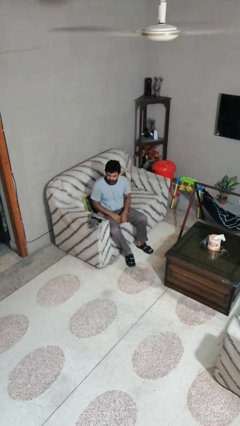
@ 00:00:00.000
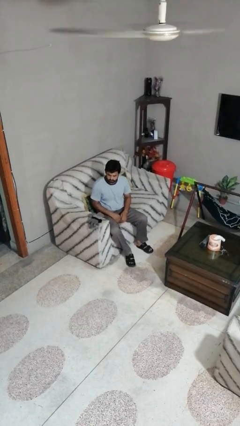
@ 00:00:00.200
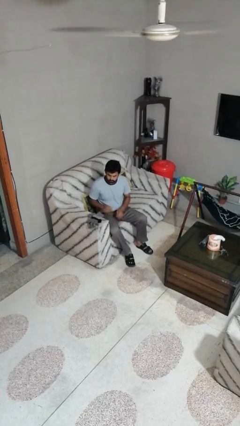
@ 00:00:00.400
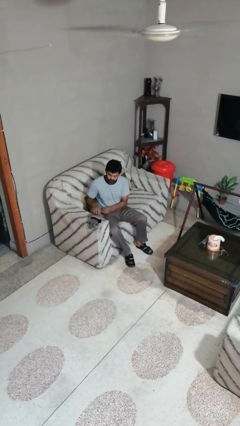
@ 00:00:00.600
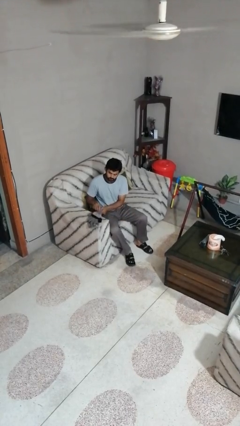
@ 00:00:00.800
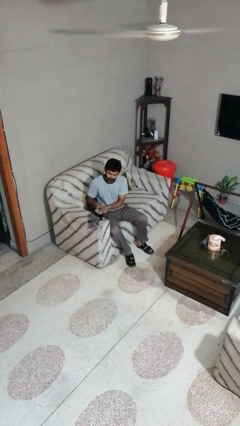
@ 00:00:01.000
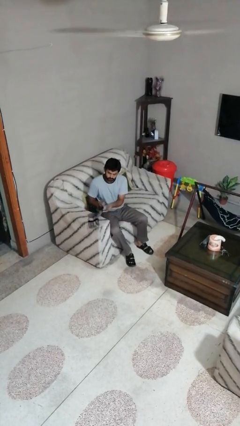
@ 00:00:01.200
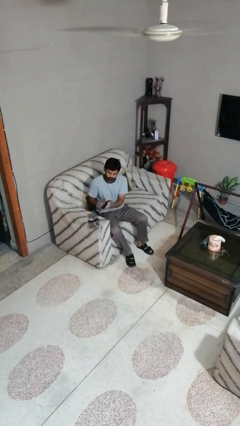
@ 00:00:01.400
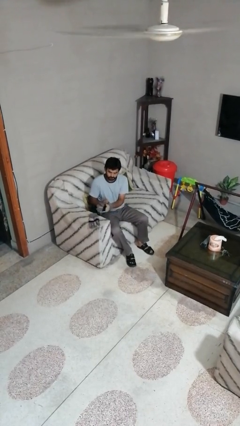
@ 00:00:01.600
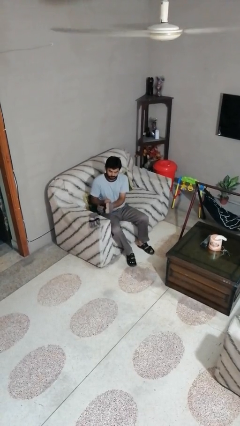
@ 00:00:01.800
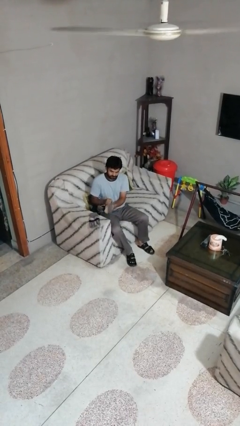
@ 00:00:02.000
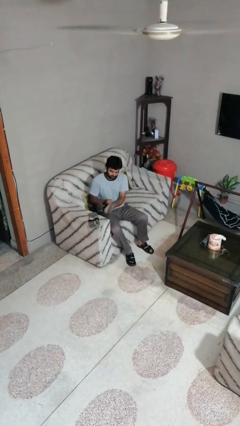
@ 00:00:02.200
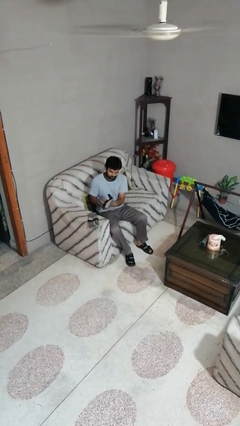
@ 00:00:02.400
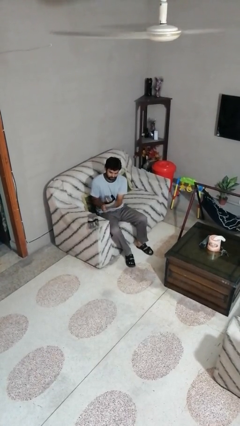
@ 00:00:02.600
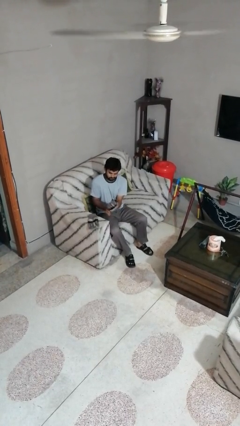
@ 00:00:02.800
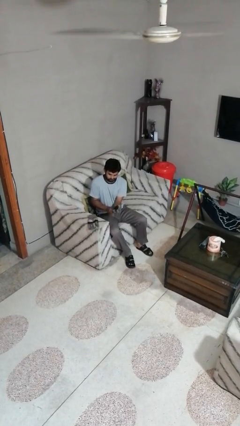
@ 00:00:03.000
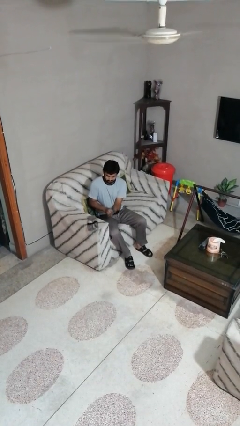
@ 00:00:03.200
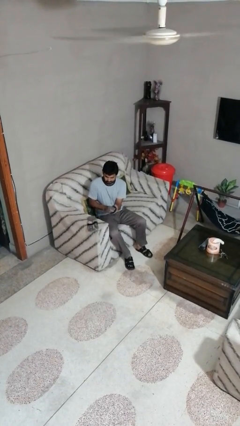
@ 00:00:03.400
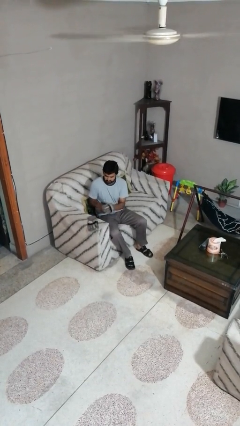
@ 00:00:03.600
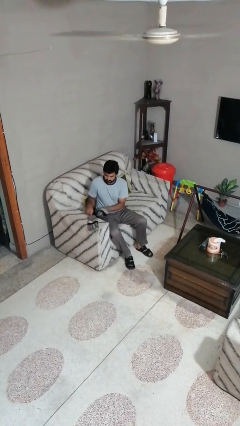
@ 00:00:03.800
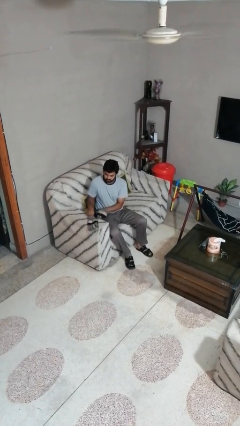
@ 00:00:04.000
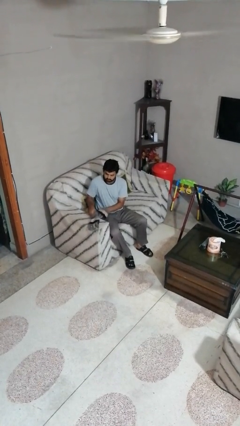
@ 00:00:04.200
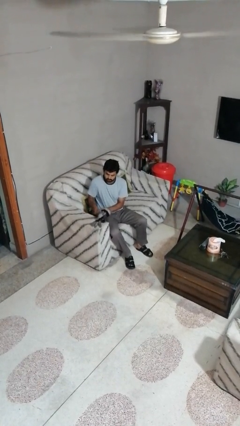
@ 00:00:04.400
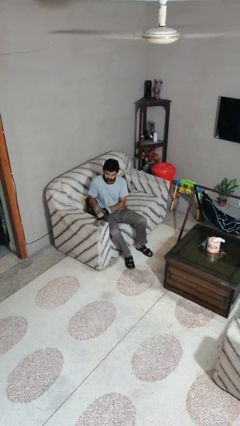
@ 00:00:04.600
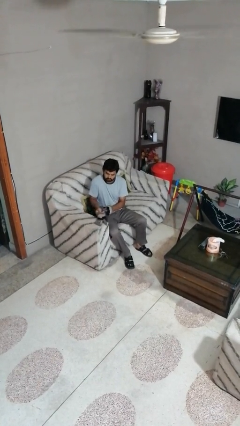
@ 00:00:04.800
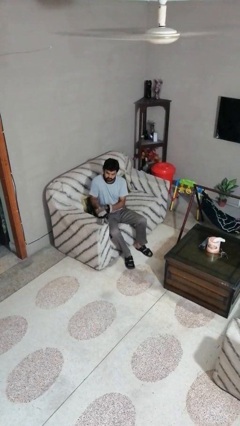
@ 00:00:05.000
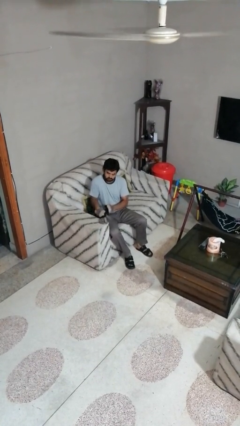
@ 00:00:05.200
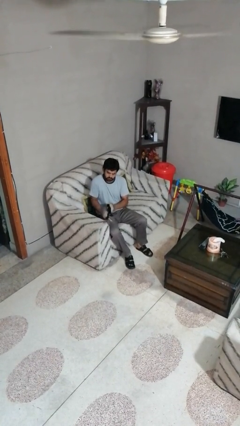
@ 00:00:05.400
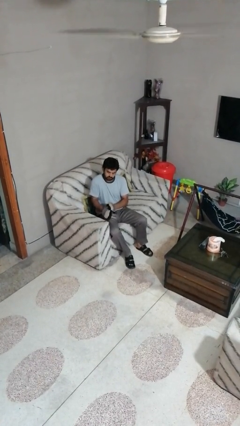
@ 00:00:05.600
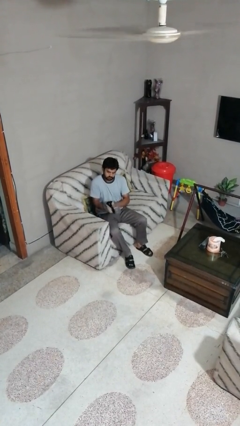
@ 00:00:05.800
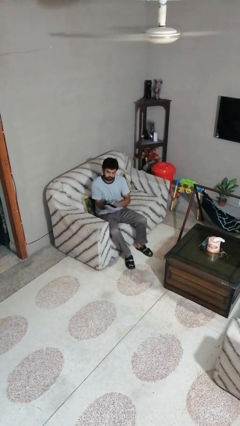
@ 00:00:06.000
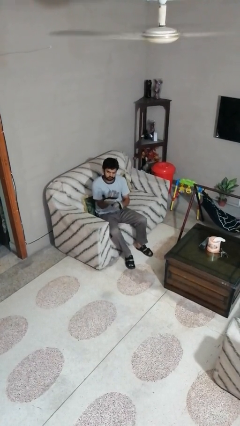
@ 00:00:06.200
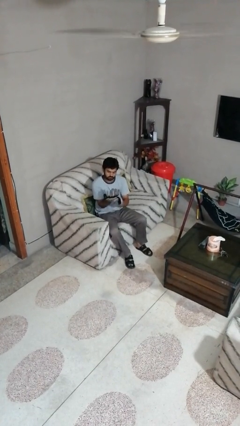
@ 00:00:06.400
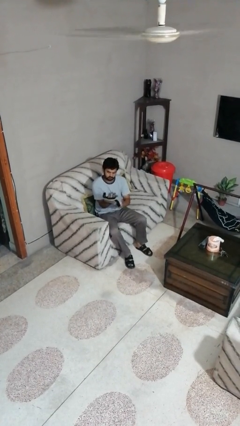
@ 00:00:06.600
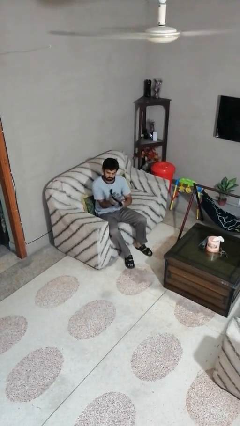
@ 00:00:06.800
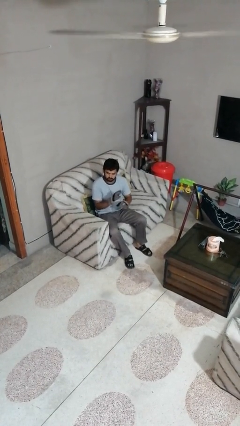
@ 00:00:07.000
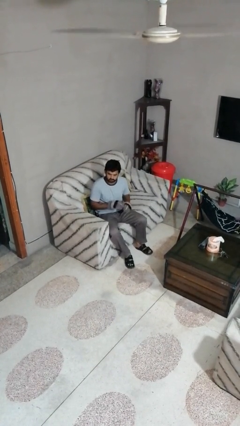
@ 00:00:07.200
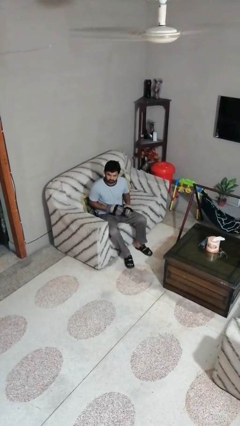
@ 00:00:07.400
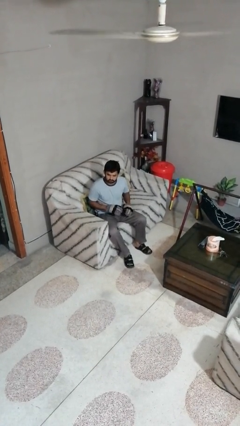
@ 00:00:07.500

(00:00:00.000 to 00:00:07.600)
person puts on gloves

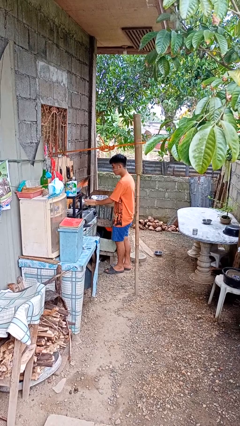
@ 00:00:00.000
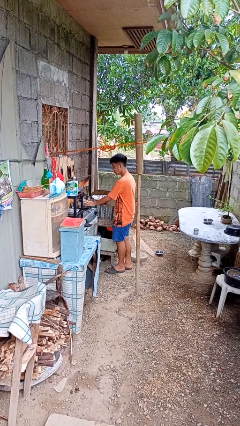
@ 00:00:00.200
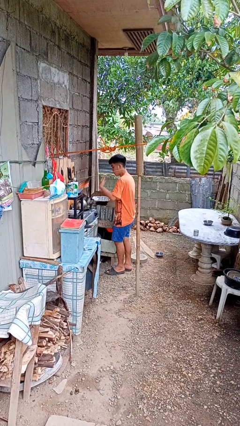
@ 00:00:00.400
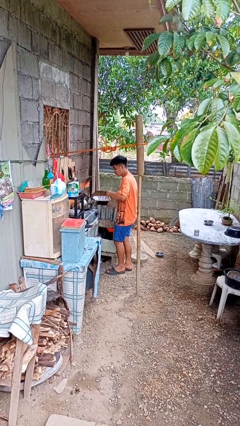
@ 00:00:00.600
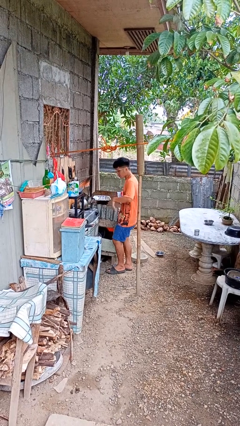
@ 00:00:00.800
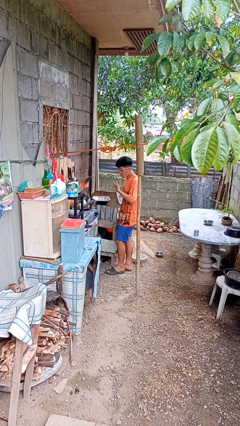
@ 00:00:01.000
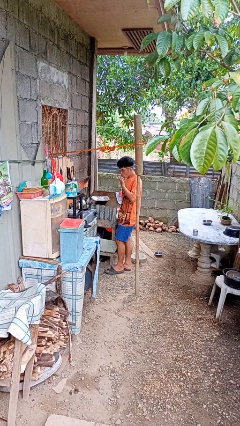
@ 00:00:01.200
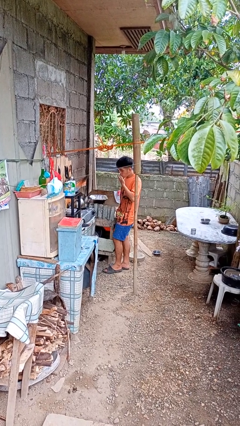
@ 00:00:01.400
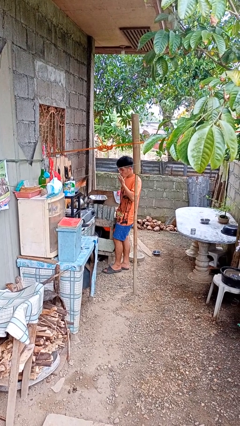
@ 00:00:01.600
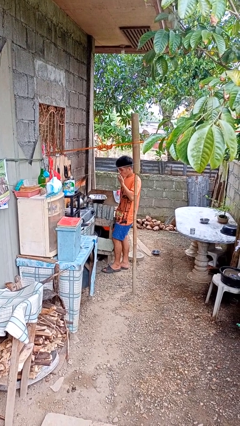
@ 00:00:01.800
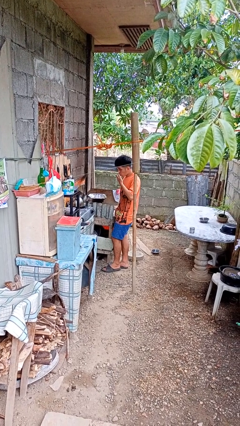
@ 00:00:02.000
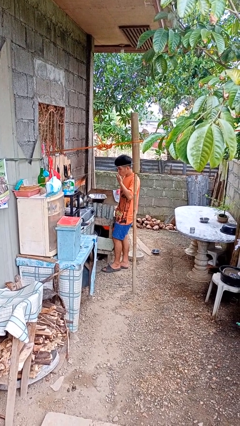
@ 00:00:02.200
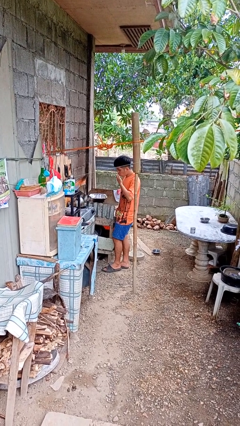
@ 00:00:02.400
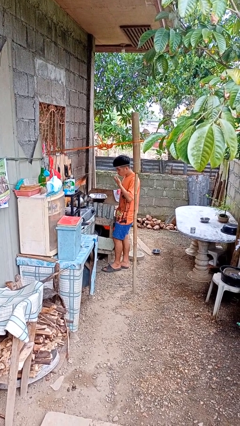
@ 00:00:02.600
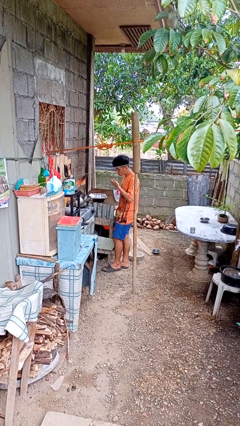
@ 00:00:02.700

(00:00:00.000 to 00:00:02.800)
person burns hand

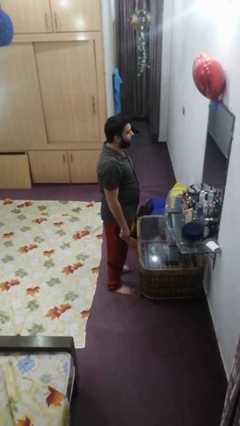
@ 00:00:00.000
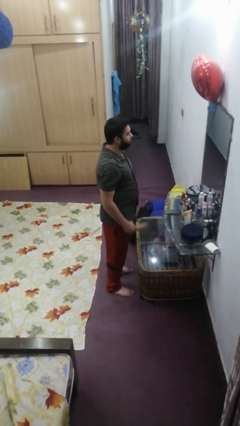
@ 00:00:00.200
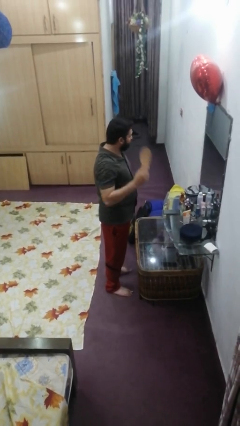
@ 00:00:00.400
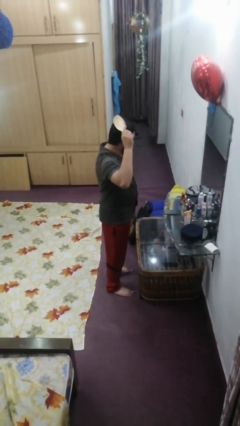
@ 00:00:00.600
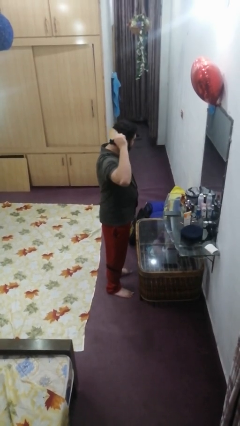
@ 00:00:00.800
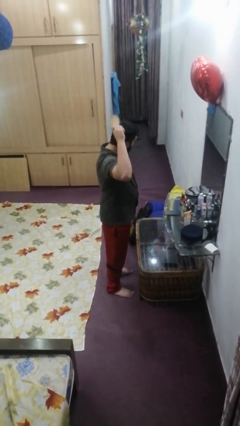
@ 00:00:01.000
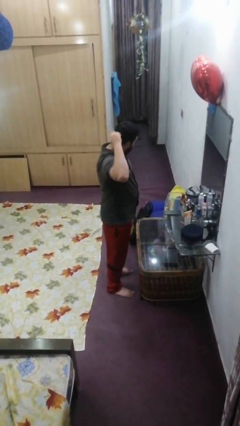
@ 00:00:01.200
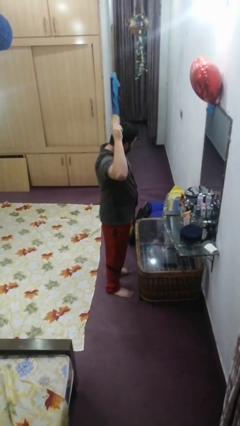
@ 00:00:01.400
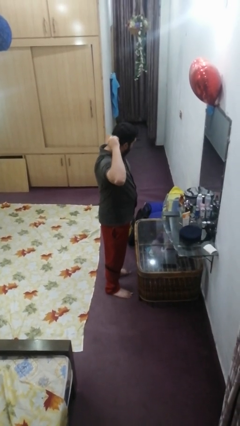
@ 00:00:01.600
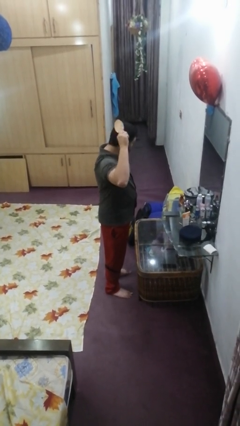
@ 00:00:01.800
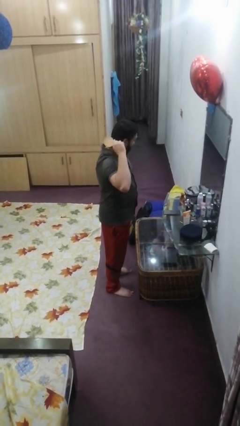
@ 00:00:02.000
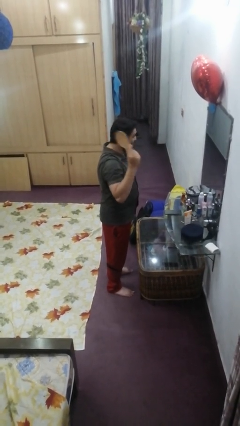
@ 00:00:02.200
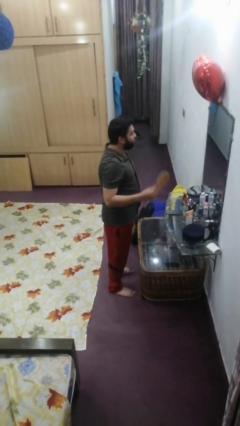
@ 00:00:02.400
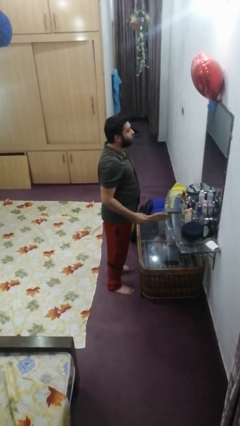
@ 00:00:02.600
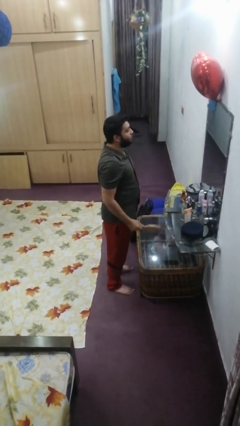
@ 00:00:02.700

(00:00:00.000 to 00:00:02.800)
person brushes hair

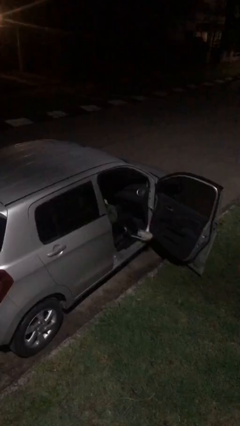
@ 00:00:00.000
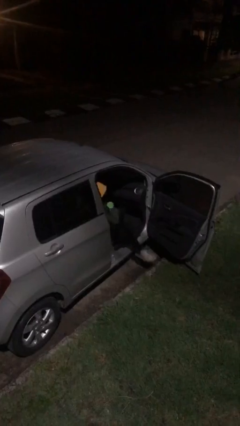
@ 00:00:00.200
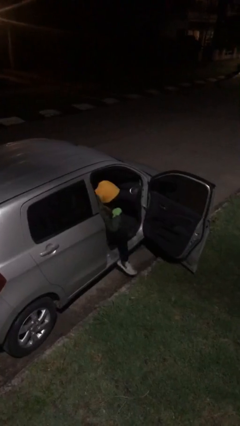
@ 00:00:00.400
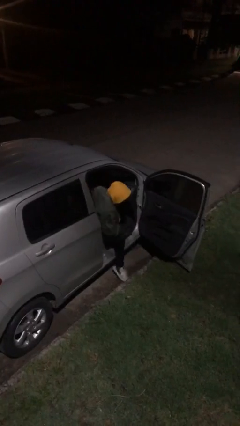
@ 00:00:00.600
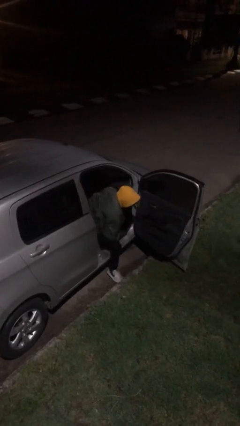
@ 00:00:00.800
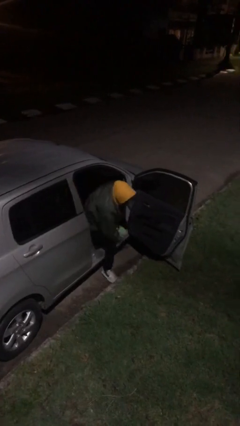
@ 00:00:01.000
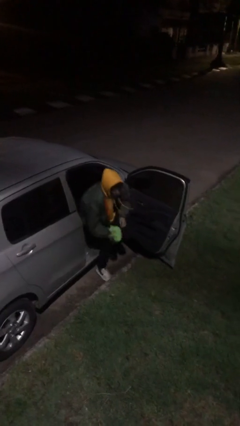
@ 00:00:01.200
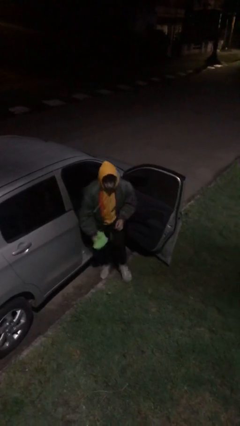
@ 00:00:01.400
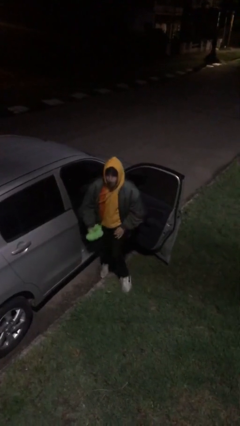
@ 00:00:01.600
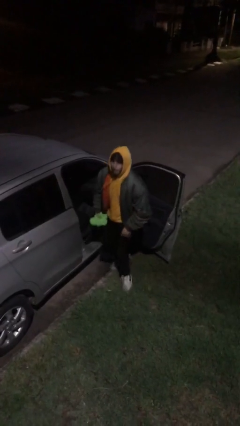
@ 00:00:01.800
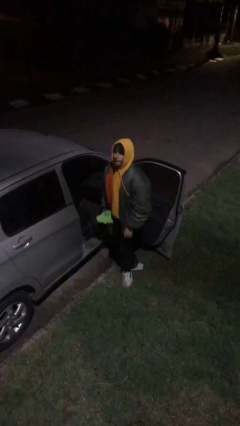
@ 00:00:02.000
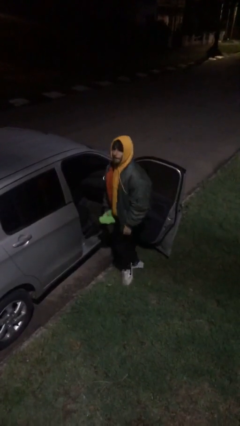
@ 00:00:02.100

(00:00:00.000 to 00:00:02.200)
person exits car

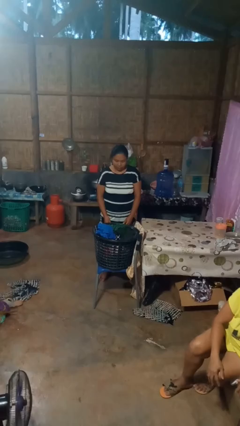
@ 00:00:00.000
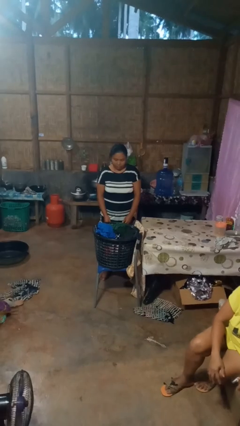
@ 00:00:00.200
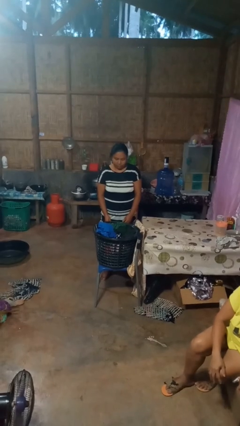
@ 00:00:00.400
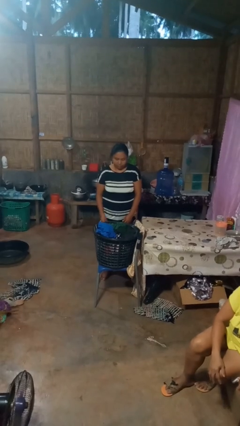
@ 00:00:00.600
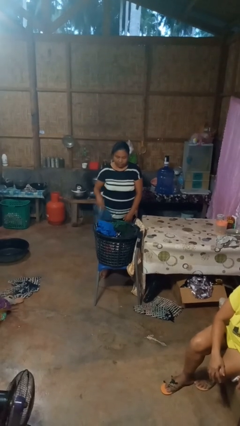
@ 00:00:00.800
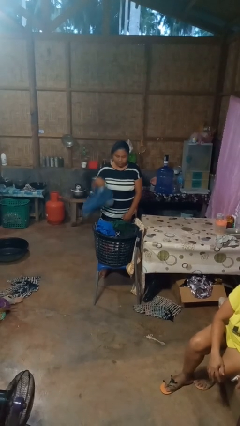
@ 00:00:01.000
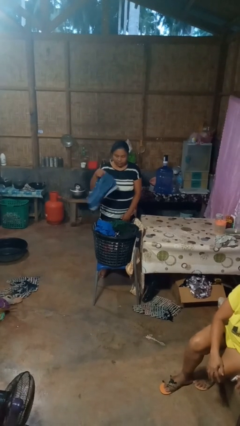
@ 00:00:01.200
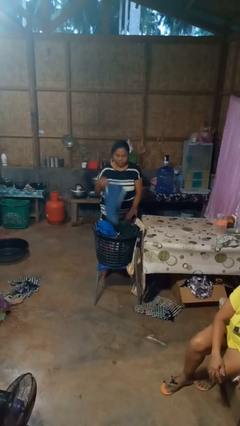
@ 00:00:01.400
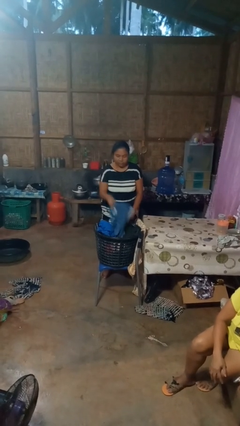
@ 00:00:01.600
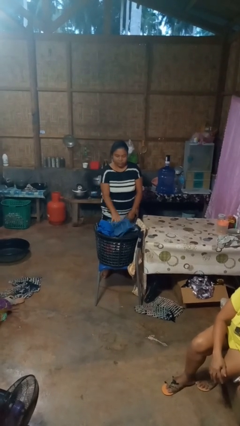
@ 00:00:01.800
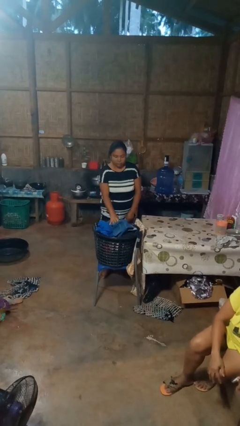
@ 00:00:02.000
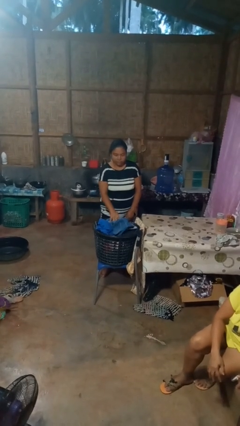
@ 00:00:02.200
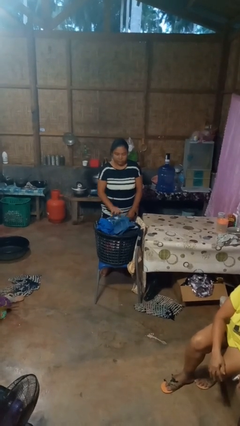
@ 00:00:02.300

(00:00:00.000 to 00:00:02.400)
person puts object into basket
